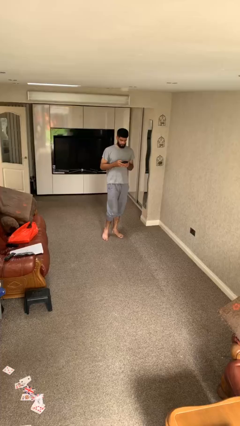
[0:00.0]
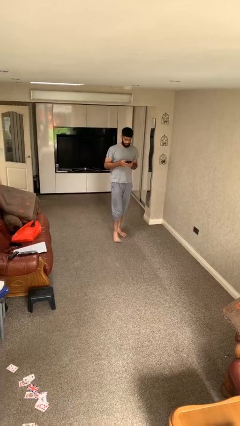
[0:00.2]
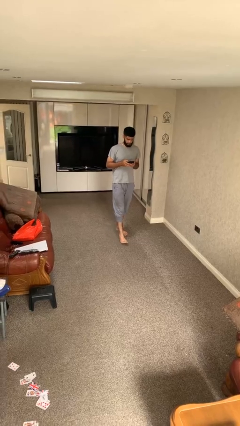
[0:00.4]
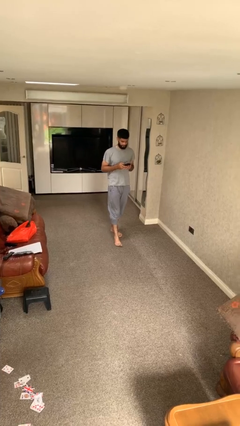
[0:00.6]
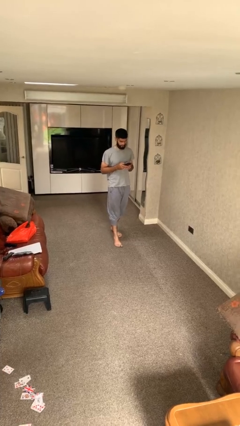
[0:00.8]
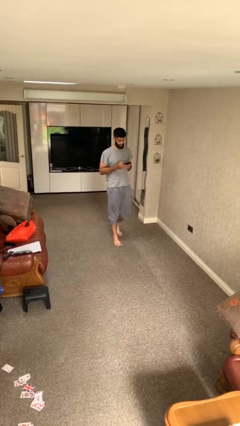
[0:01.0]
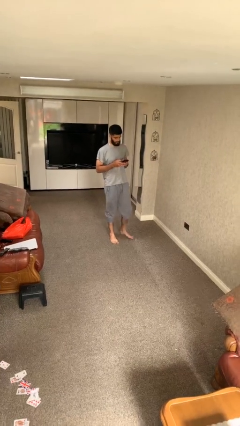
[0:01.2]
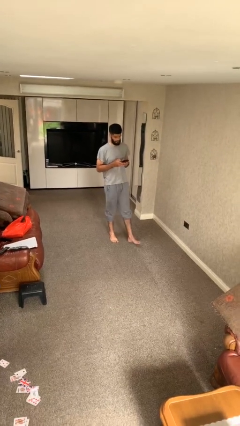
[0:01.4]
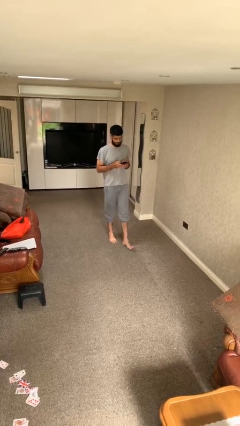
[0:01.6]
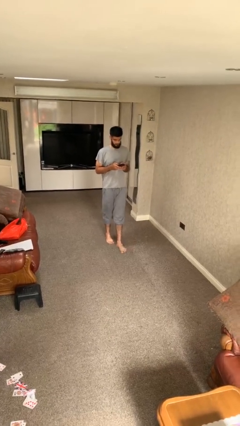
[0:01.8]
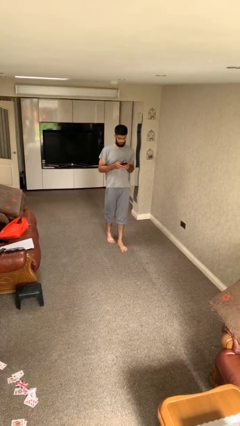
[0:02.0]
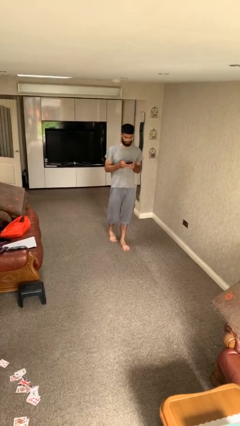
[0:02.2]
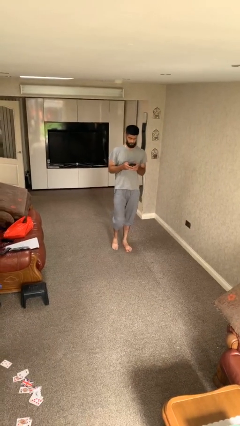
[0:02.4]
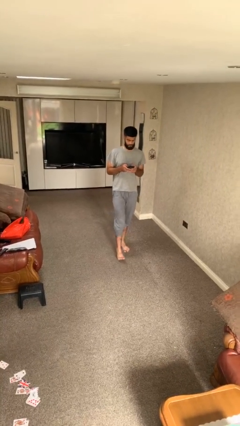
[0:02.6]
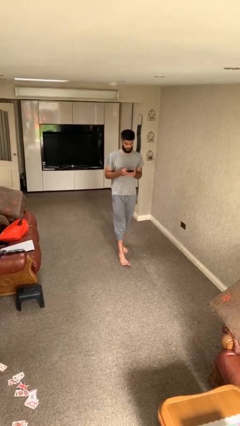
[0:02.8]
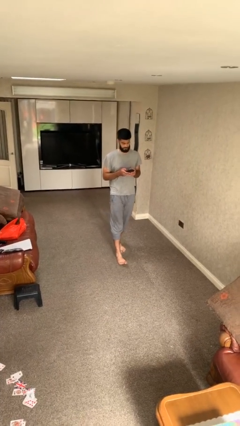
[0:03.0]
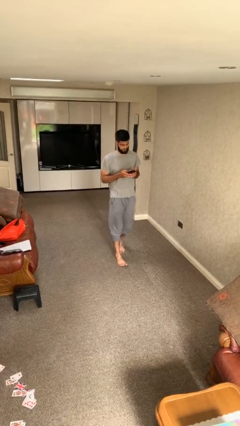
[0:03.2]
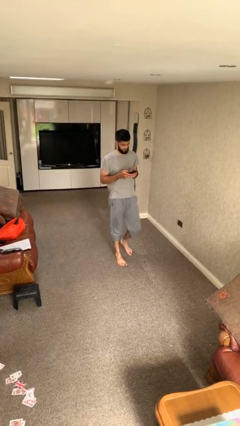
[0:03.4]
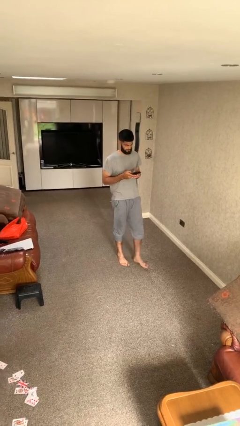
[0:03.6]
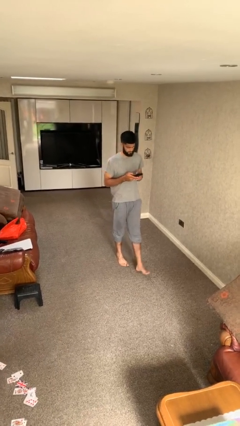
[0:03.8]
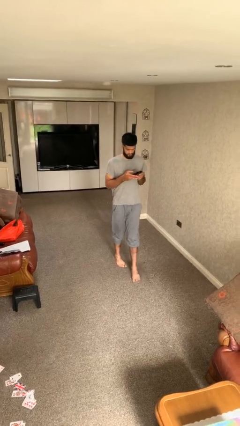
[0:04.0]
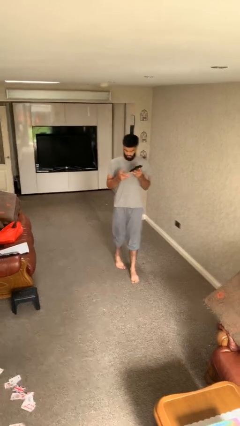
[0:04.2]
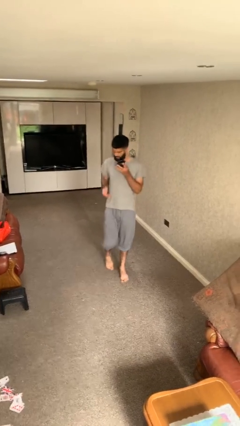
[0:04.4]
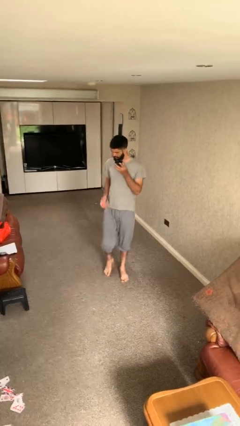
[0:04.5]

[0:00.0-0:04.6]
person texts on phone

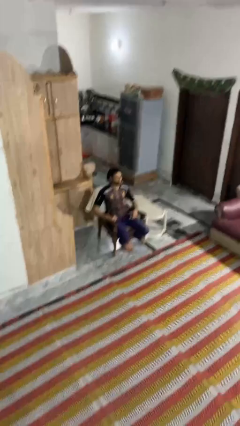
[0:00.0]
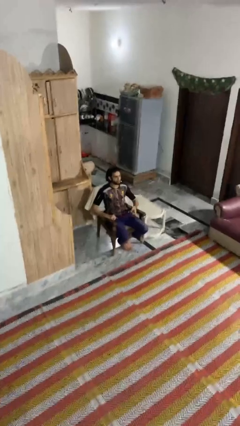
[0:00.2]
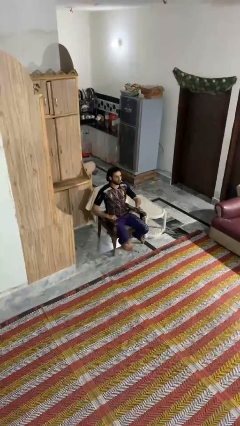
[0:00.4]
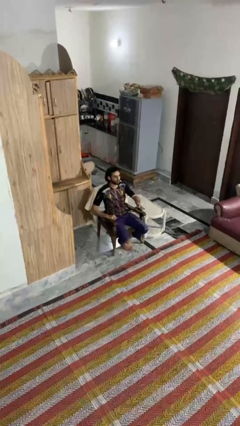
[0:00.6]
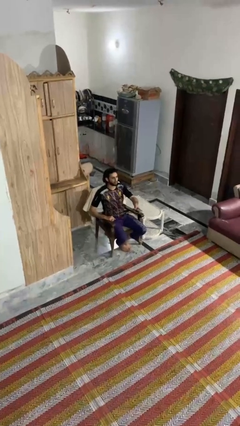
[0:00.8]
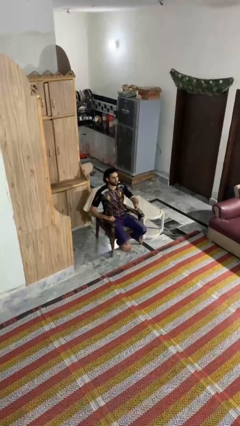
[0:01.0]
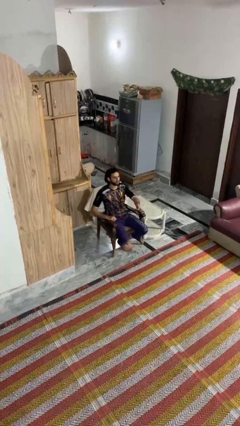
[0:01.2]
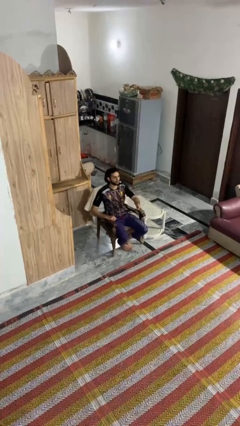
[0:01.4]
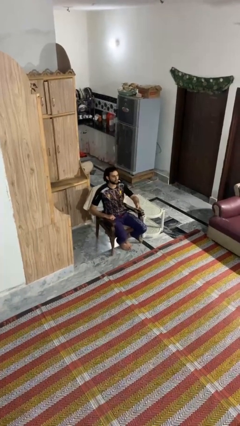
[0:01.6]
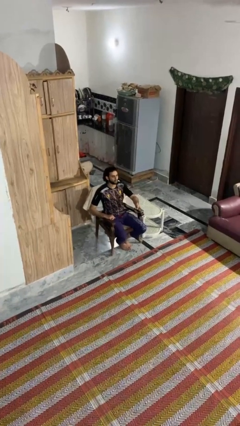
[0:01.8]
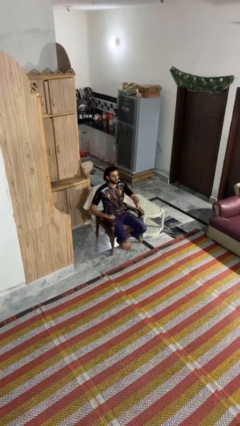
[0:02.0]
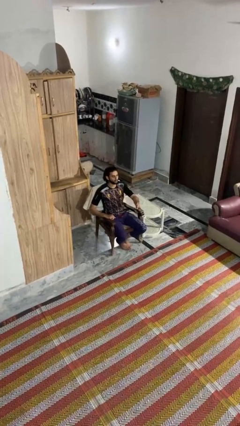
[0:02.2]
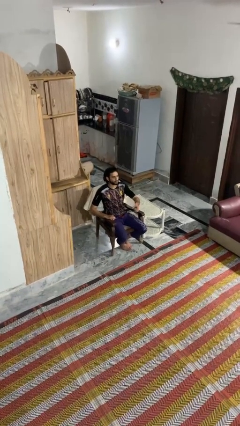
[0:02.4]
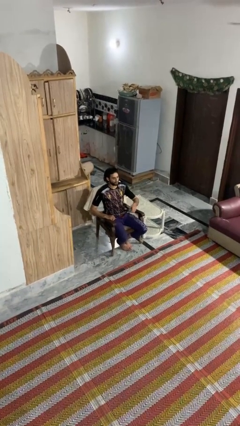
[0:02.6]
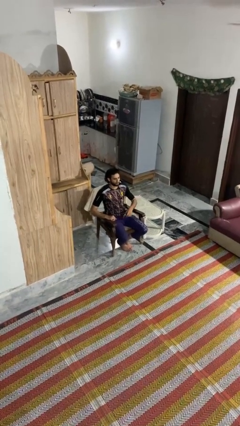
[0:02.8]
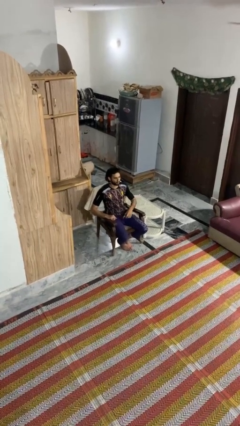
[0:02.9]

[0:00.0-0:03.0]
person uses television remote

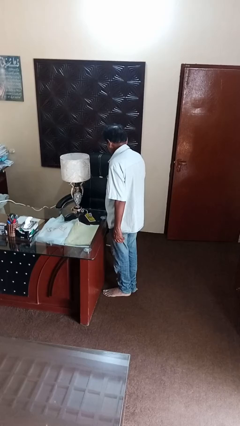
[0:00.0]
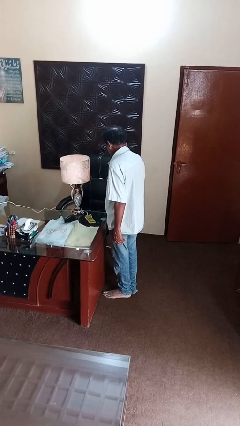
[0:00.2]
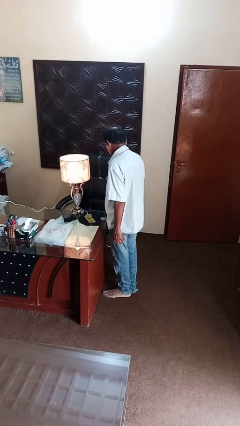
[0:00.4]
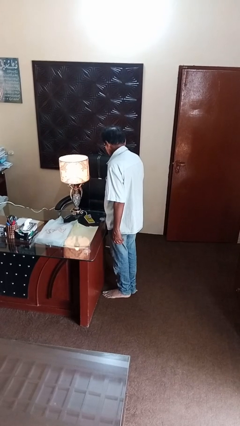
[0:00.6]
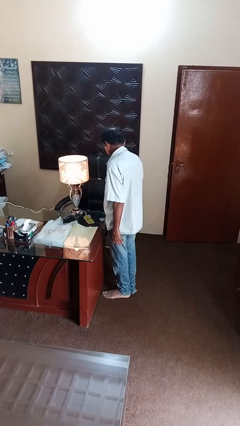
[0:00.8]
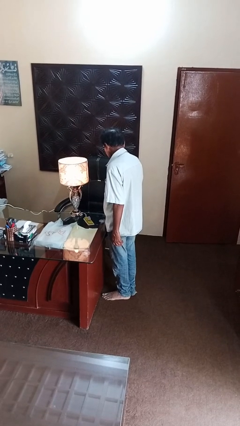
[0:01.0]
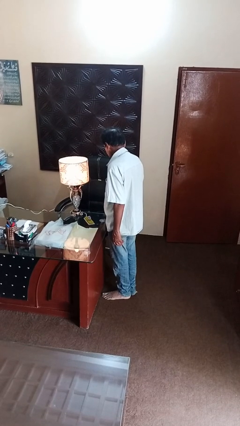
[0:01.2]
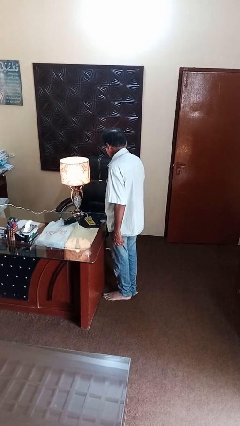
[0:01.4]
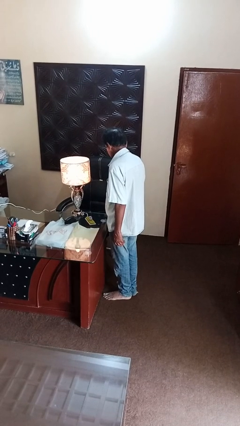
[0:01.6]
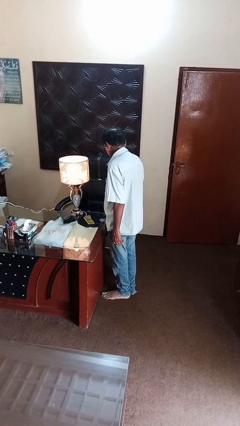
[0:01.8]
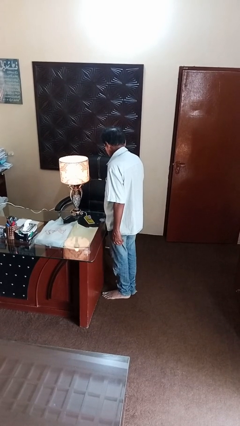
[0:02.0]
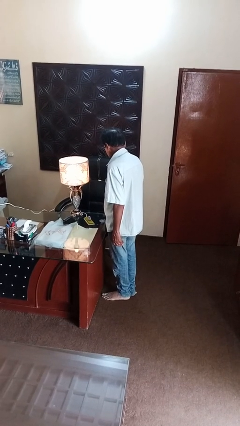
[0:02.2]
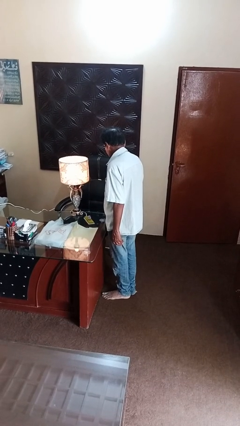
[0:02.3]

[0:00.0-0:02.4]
person turns on lamp

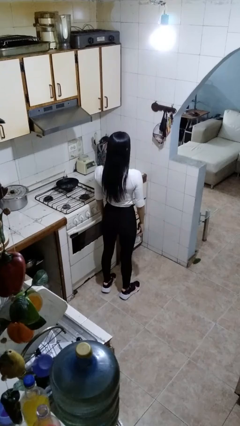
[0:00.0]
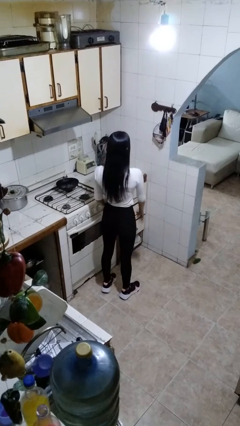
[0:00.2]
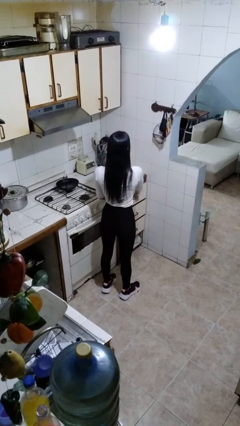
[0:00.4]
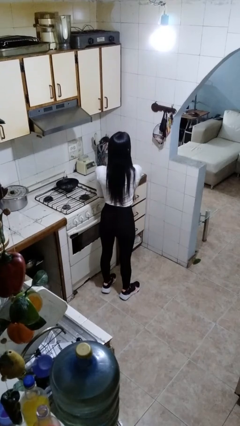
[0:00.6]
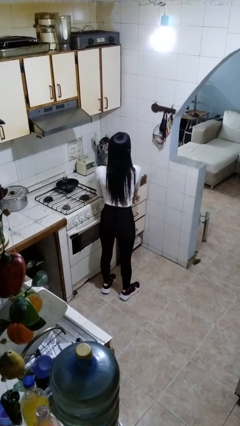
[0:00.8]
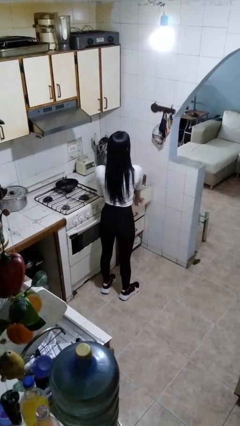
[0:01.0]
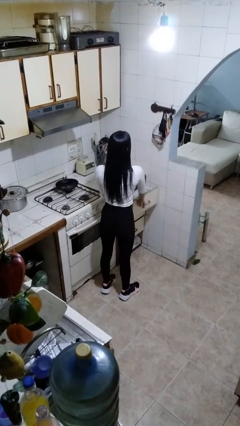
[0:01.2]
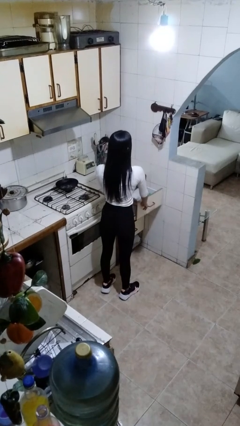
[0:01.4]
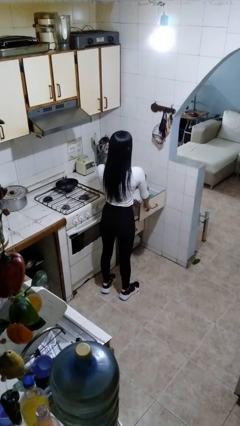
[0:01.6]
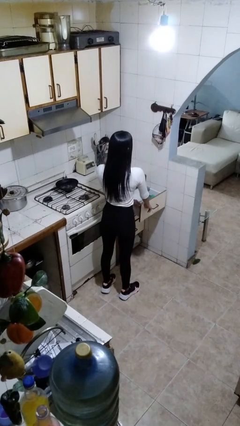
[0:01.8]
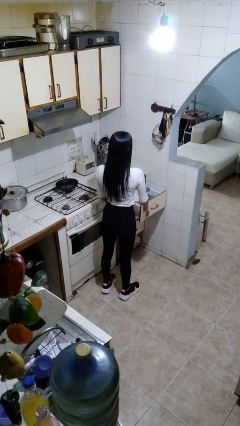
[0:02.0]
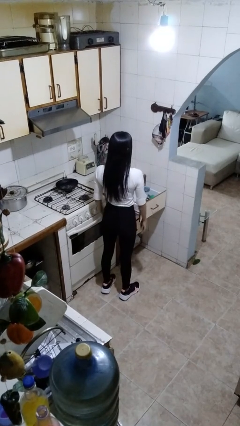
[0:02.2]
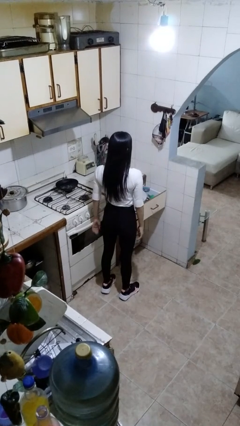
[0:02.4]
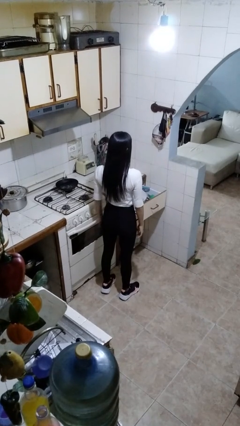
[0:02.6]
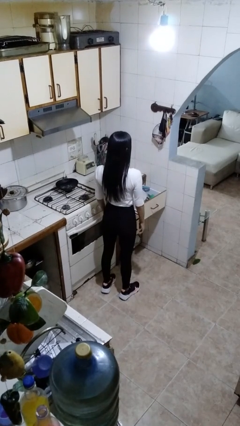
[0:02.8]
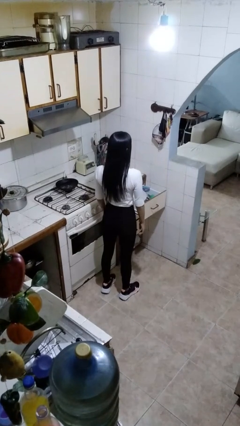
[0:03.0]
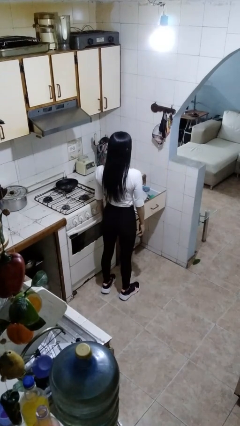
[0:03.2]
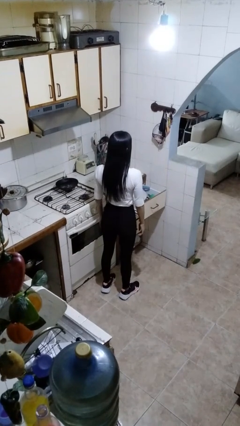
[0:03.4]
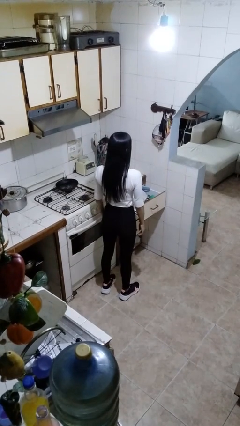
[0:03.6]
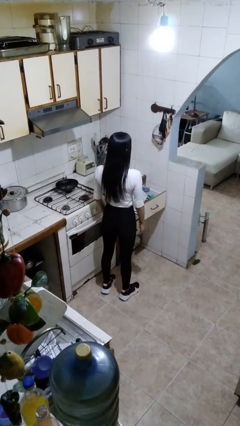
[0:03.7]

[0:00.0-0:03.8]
person opens kitchen drawer

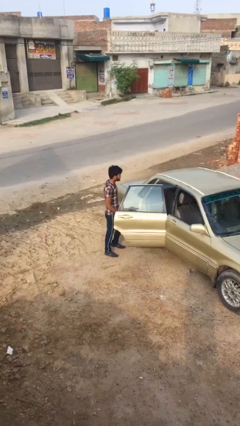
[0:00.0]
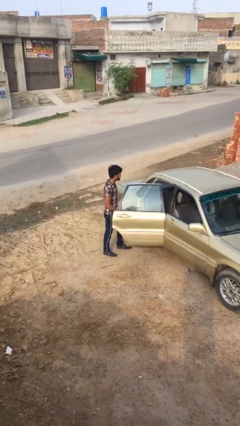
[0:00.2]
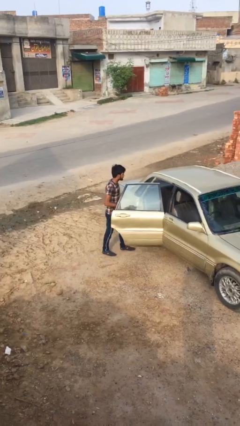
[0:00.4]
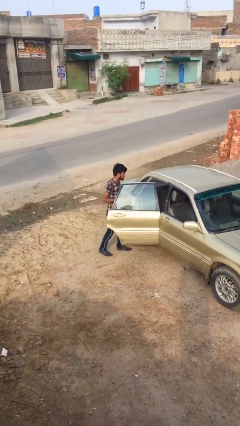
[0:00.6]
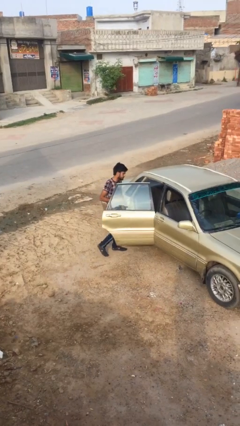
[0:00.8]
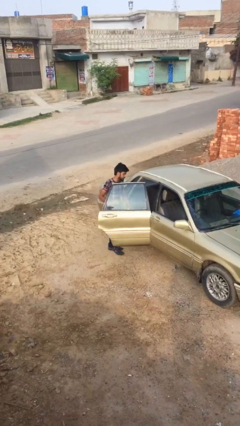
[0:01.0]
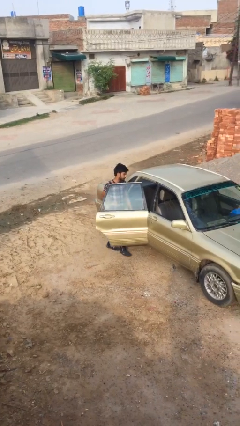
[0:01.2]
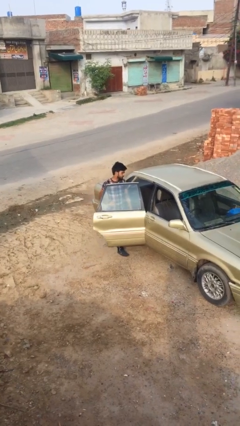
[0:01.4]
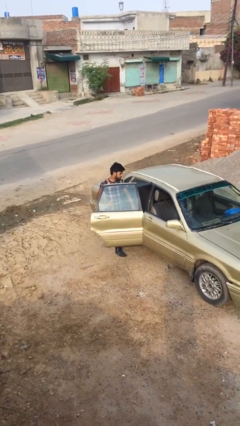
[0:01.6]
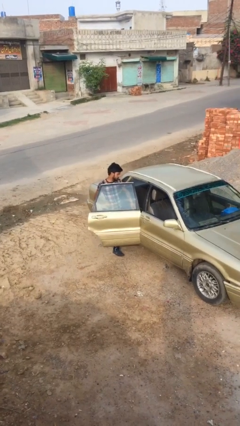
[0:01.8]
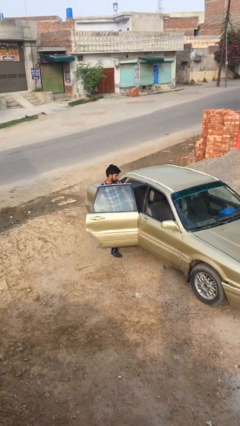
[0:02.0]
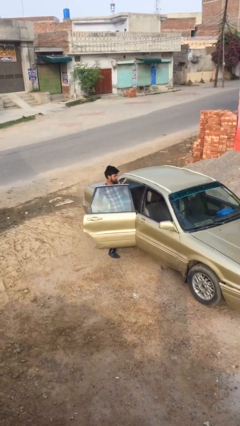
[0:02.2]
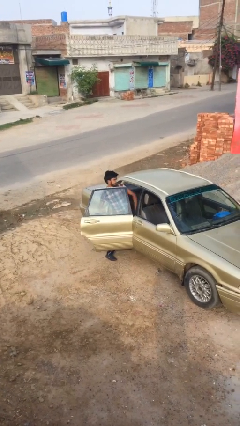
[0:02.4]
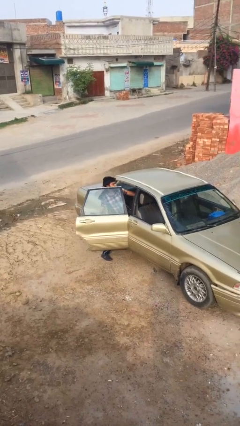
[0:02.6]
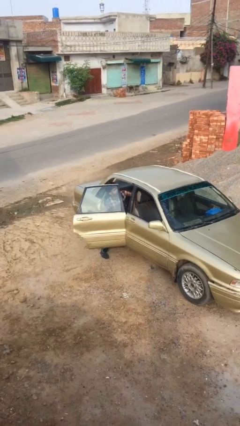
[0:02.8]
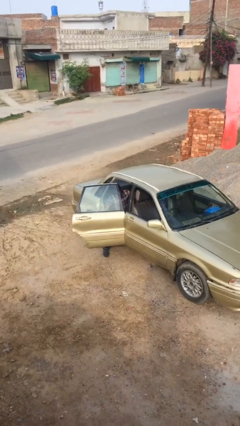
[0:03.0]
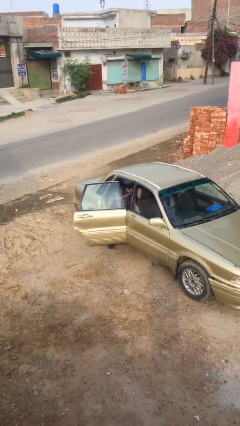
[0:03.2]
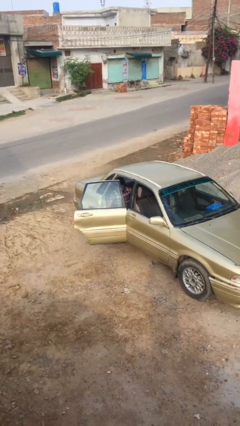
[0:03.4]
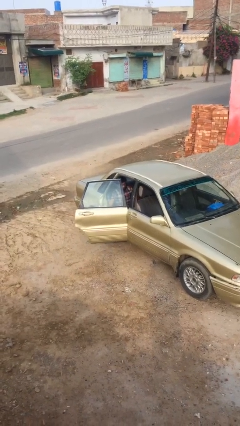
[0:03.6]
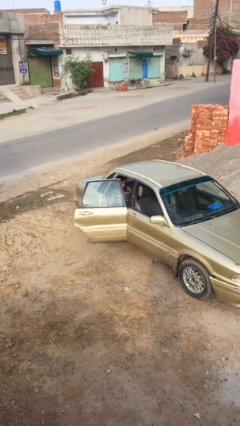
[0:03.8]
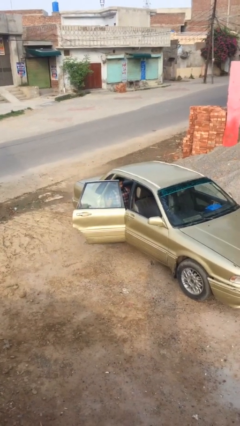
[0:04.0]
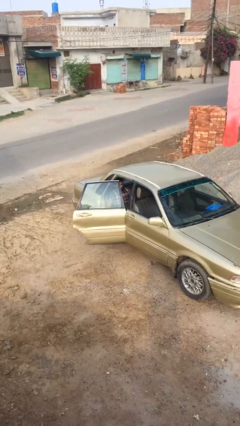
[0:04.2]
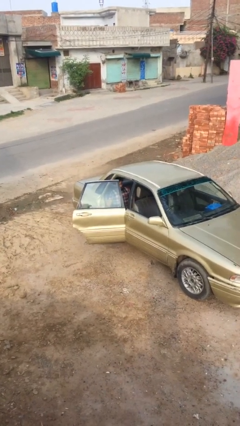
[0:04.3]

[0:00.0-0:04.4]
person enters car
